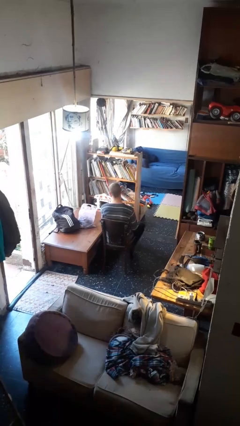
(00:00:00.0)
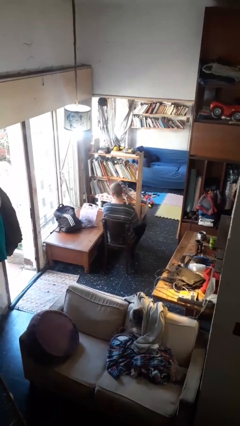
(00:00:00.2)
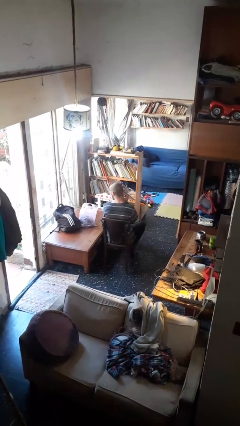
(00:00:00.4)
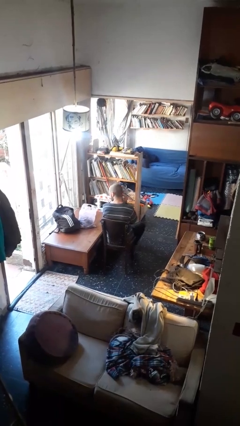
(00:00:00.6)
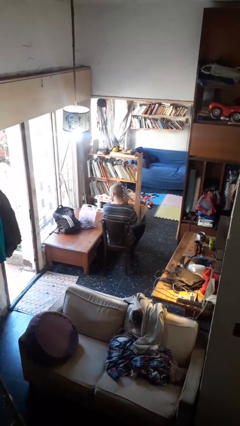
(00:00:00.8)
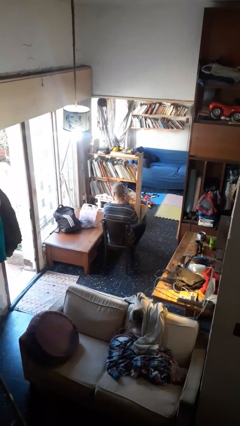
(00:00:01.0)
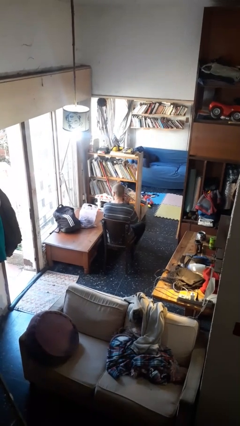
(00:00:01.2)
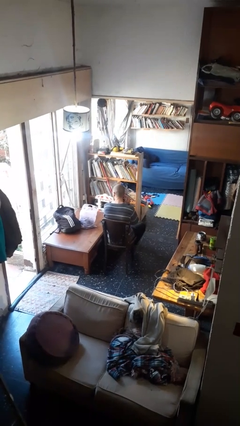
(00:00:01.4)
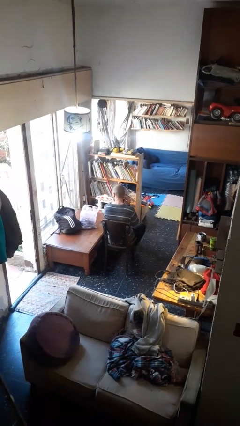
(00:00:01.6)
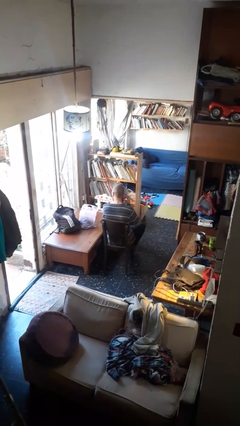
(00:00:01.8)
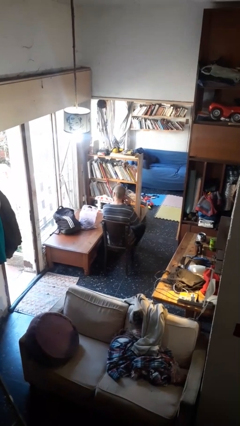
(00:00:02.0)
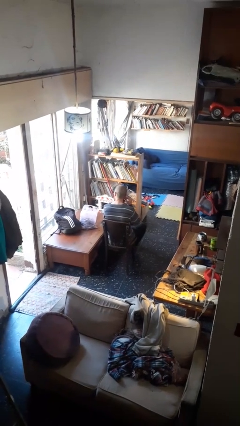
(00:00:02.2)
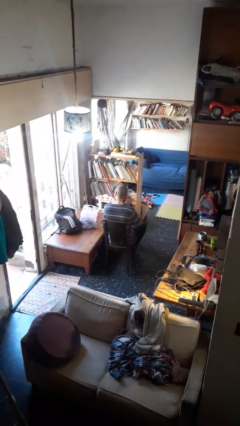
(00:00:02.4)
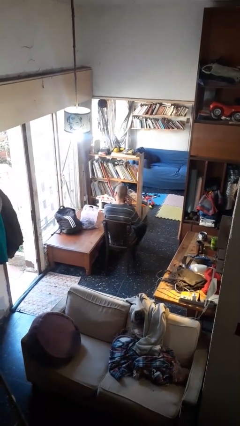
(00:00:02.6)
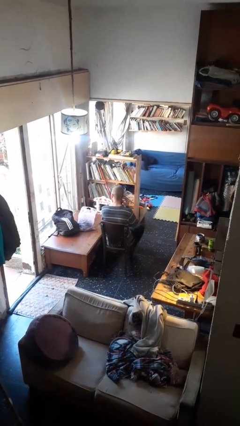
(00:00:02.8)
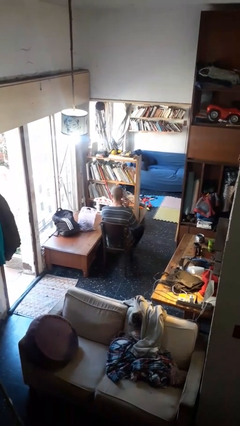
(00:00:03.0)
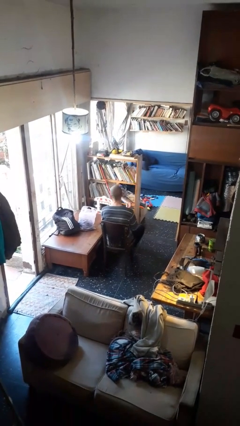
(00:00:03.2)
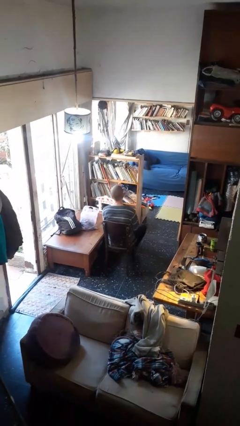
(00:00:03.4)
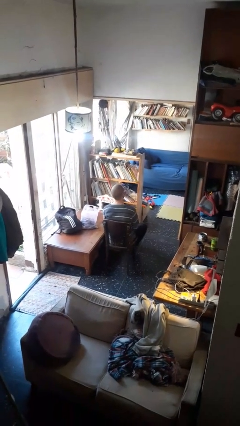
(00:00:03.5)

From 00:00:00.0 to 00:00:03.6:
person puts on earrings

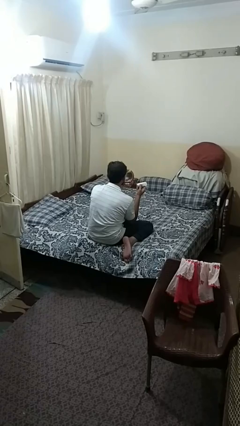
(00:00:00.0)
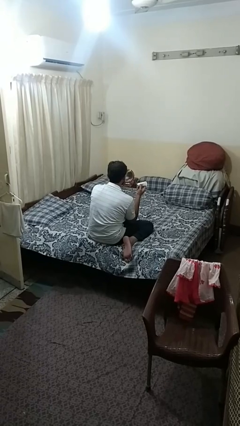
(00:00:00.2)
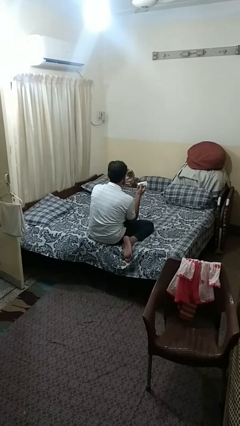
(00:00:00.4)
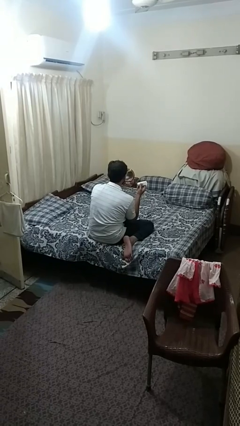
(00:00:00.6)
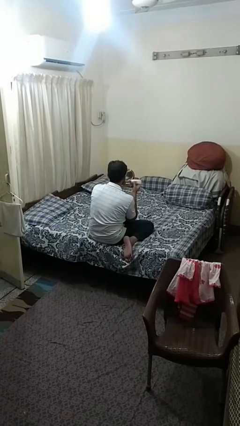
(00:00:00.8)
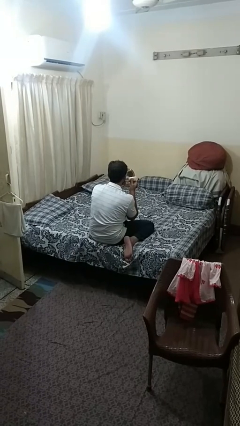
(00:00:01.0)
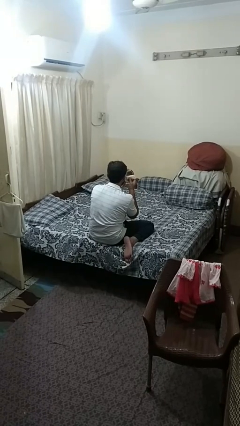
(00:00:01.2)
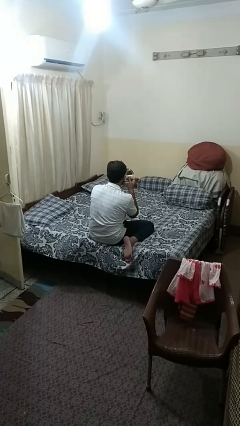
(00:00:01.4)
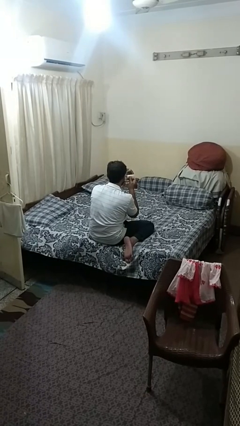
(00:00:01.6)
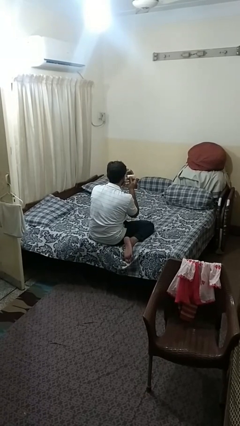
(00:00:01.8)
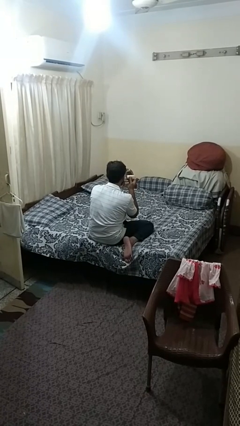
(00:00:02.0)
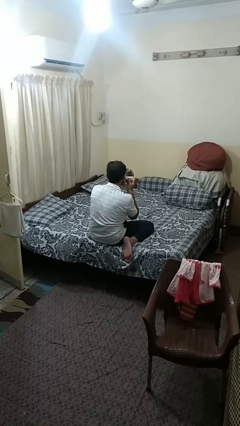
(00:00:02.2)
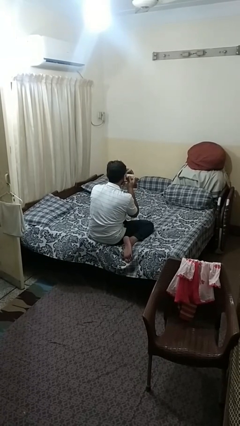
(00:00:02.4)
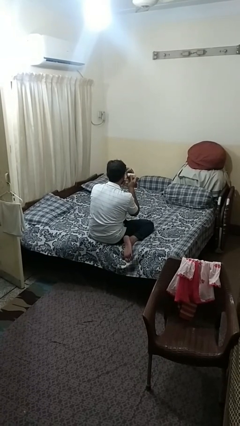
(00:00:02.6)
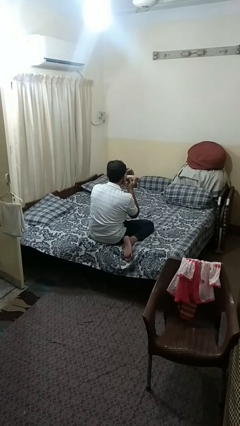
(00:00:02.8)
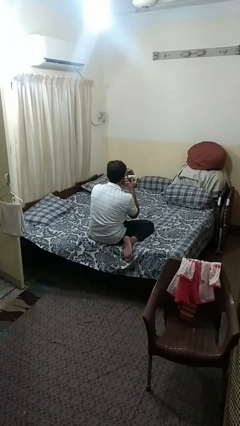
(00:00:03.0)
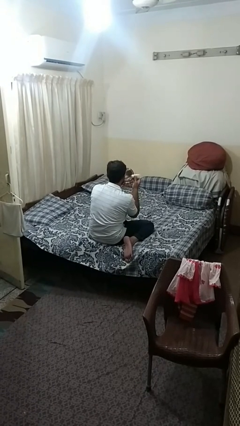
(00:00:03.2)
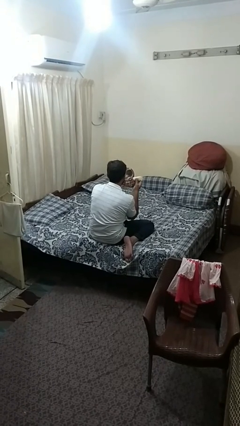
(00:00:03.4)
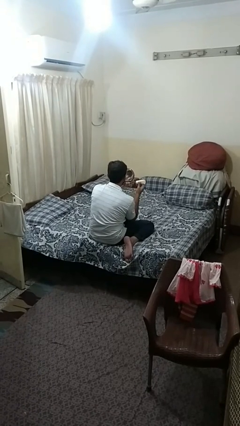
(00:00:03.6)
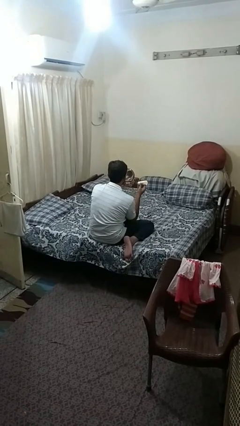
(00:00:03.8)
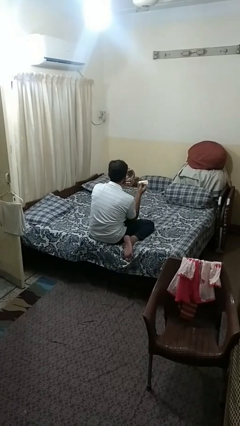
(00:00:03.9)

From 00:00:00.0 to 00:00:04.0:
person applies foundation makeup

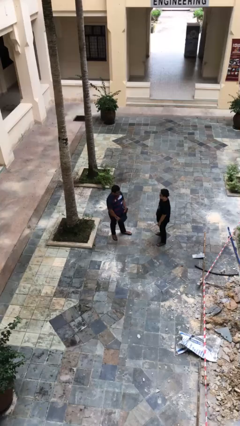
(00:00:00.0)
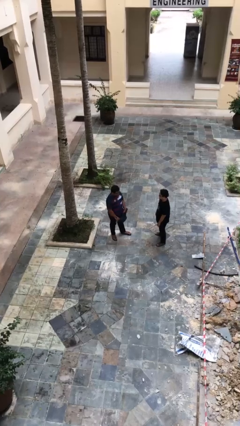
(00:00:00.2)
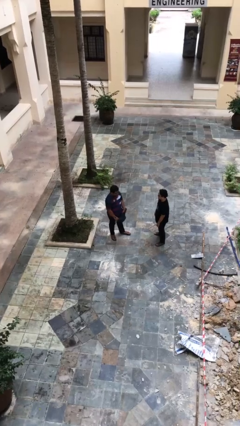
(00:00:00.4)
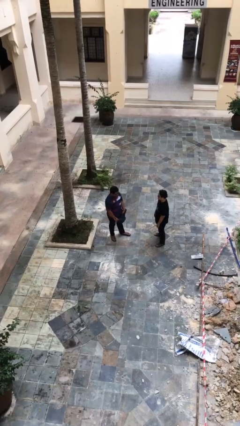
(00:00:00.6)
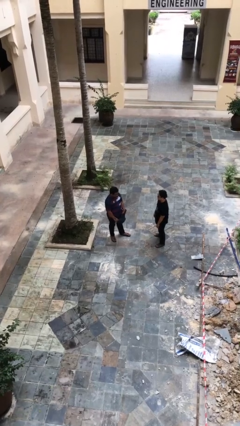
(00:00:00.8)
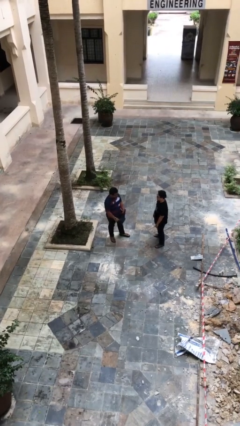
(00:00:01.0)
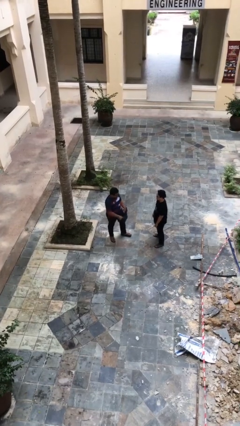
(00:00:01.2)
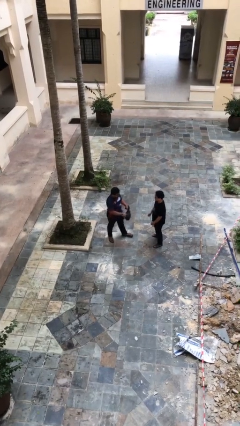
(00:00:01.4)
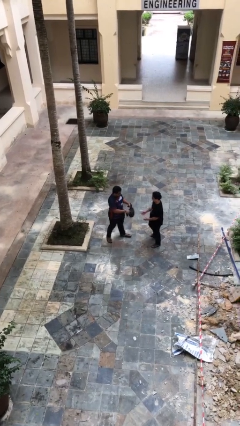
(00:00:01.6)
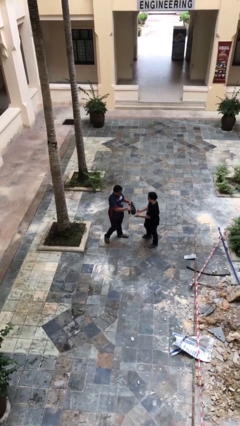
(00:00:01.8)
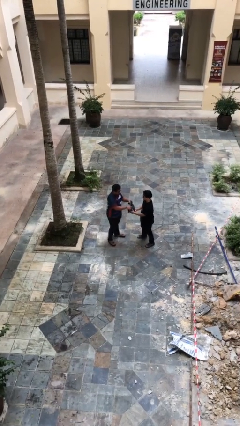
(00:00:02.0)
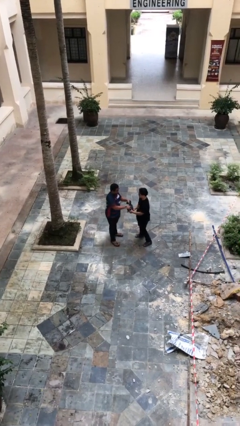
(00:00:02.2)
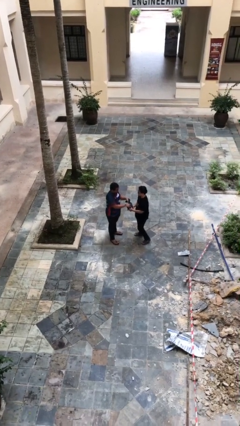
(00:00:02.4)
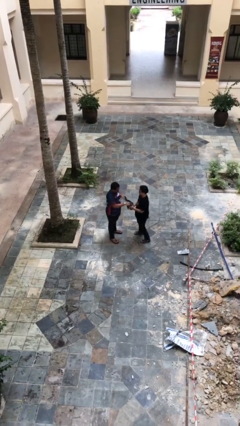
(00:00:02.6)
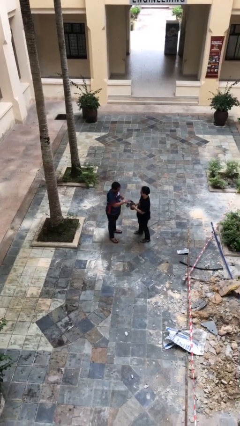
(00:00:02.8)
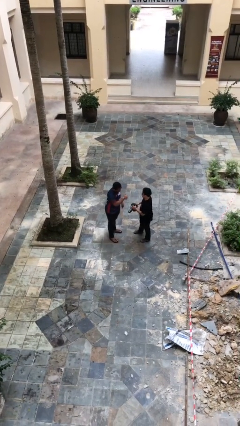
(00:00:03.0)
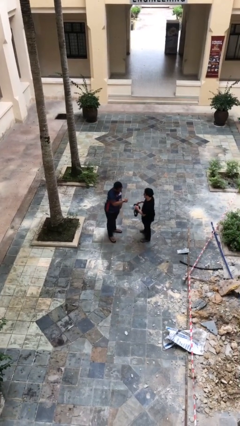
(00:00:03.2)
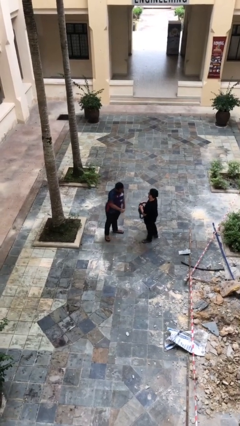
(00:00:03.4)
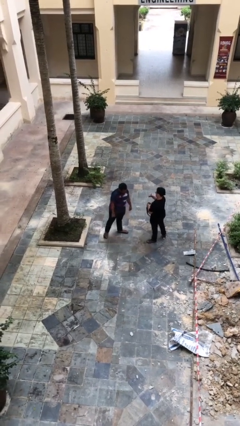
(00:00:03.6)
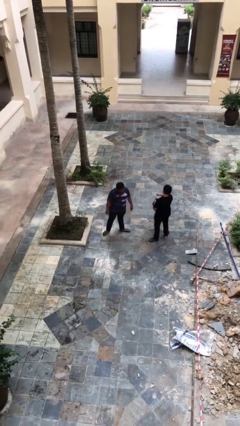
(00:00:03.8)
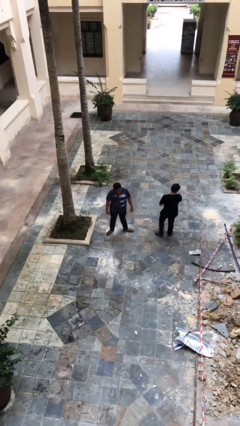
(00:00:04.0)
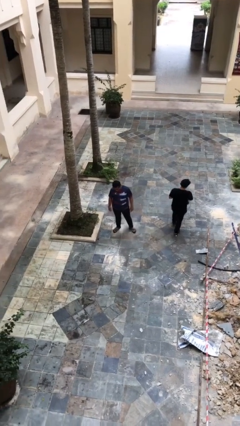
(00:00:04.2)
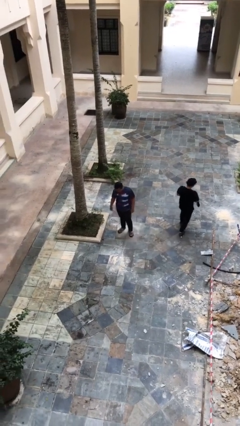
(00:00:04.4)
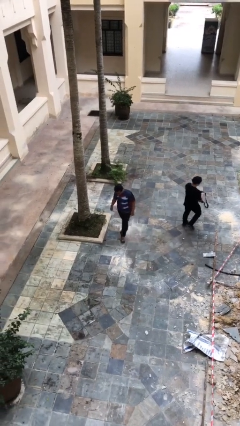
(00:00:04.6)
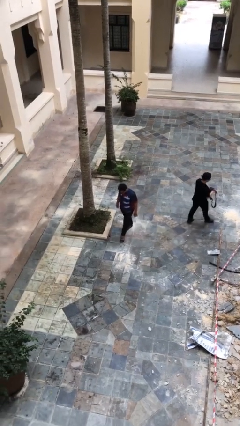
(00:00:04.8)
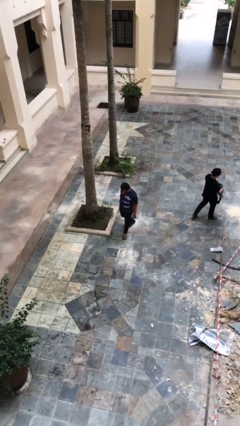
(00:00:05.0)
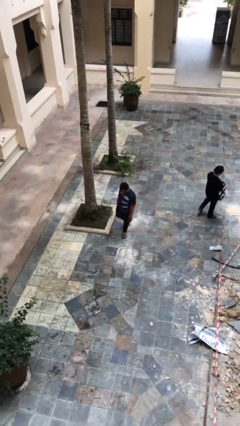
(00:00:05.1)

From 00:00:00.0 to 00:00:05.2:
person transfers object to person

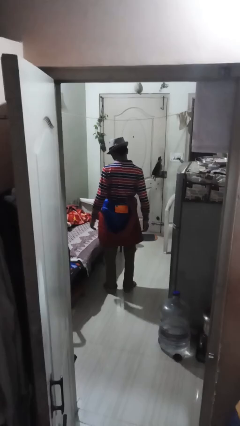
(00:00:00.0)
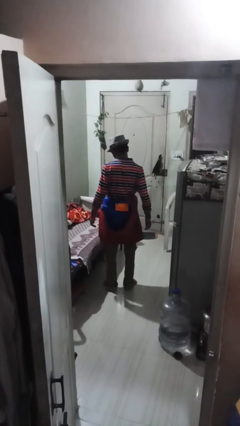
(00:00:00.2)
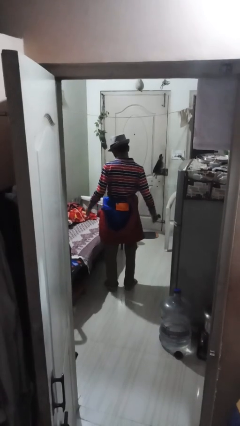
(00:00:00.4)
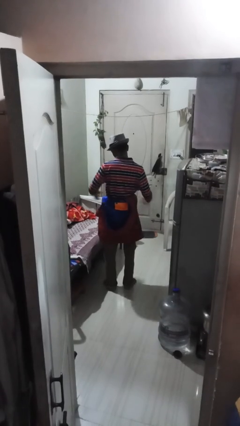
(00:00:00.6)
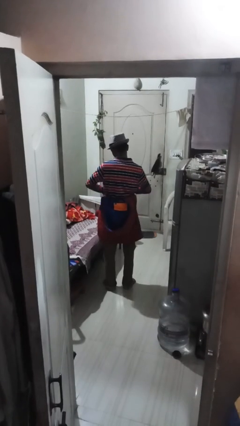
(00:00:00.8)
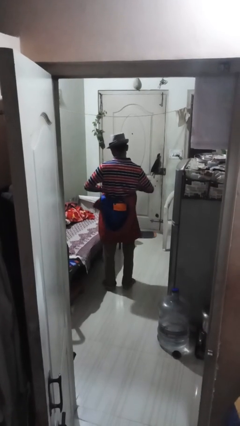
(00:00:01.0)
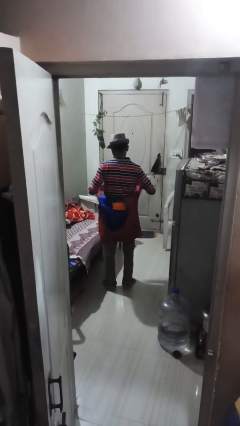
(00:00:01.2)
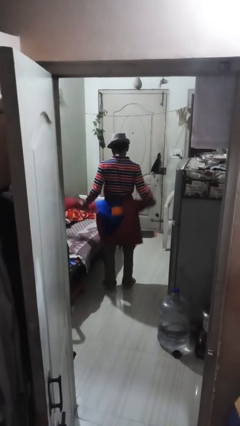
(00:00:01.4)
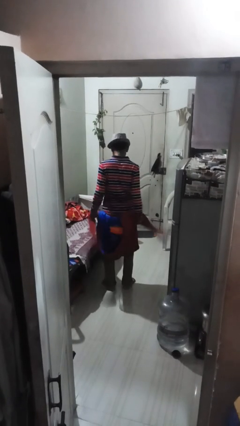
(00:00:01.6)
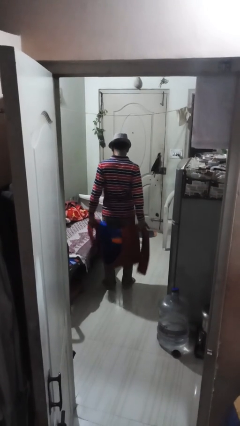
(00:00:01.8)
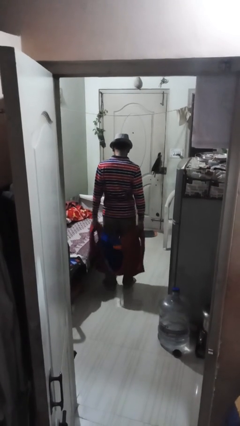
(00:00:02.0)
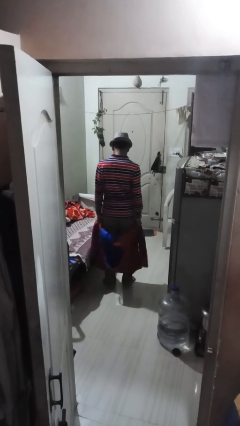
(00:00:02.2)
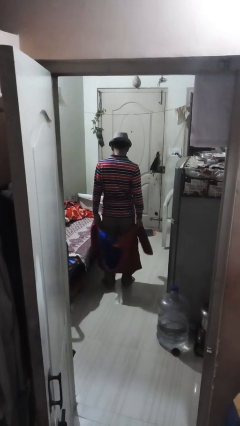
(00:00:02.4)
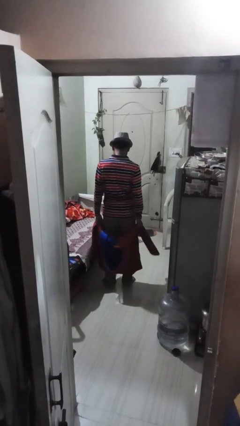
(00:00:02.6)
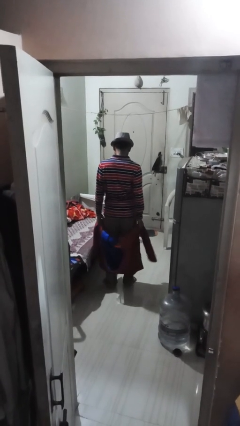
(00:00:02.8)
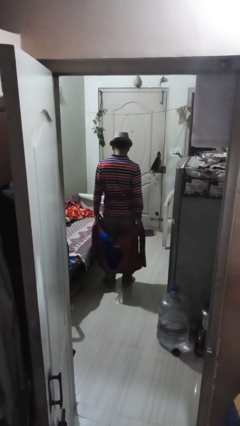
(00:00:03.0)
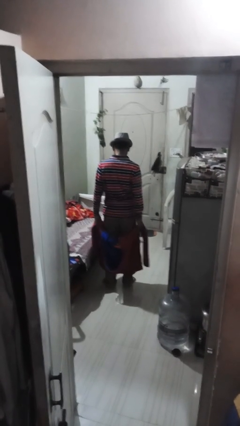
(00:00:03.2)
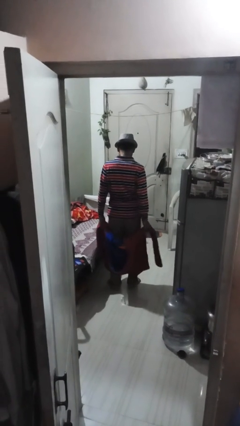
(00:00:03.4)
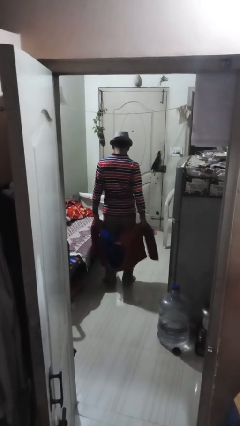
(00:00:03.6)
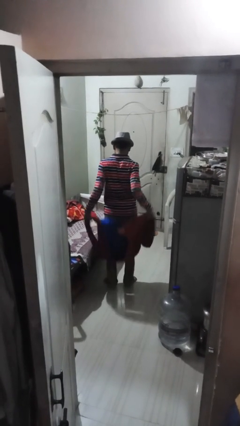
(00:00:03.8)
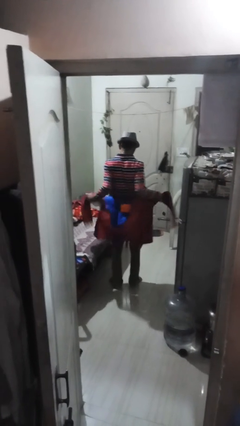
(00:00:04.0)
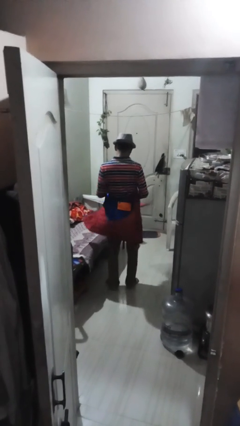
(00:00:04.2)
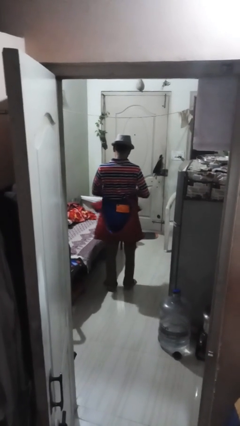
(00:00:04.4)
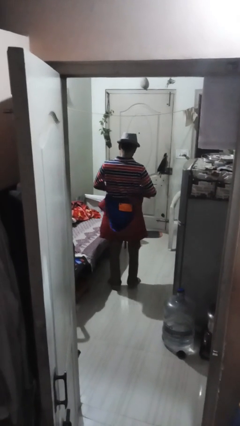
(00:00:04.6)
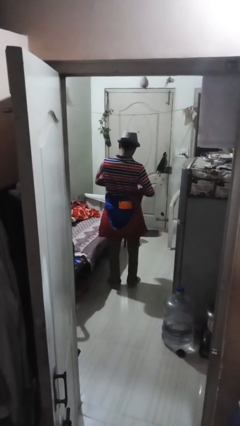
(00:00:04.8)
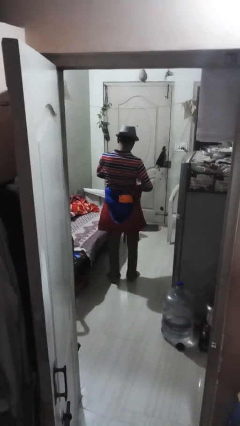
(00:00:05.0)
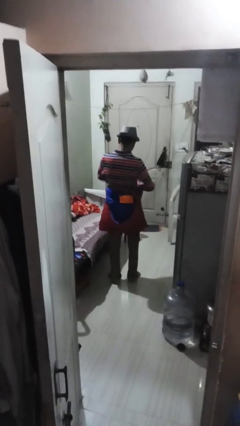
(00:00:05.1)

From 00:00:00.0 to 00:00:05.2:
person unties jacket around waist
